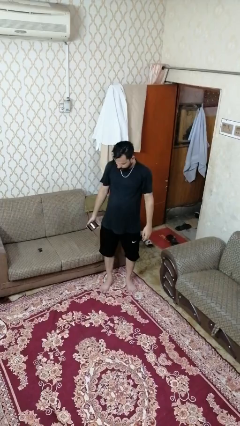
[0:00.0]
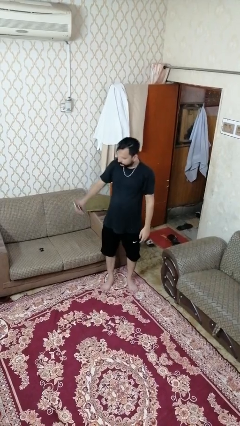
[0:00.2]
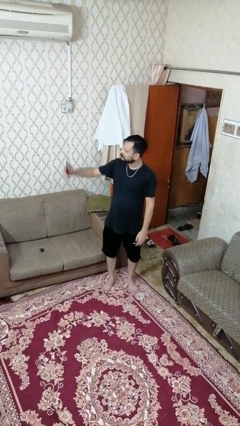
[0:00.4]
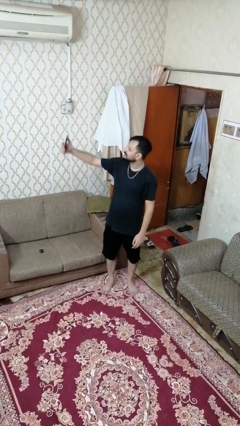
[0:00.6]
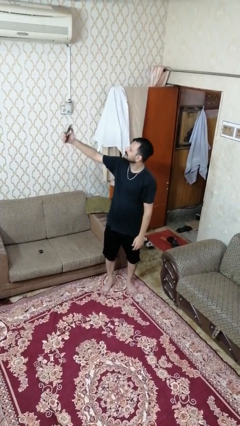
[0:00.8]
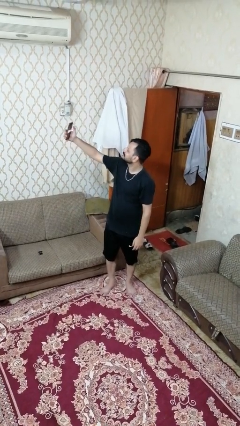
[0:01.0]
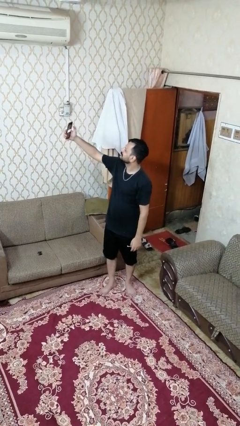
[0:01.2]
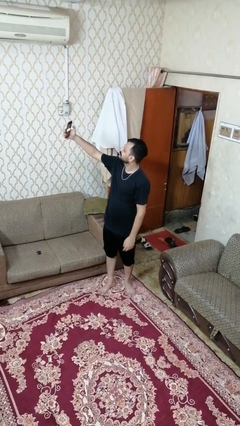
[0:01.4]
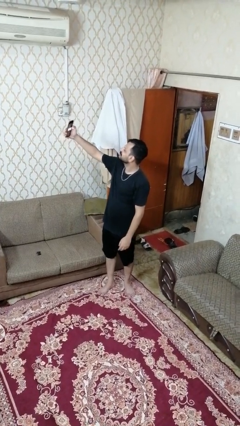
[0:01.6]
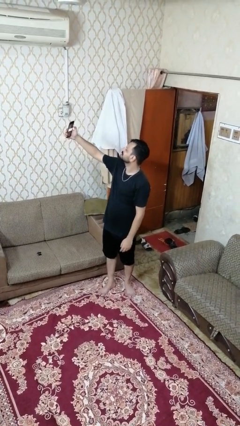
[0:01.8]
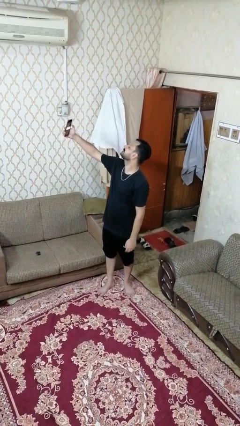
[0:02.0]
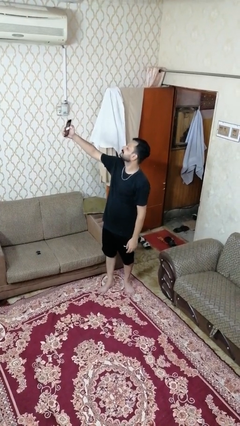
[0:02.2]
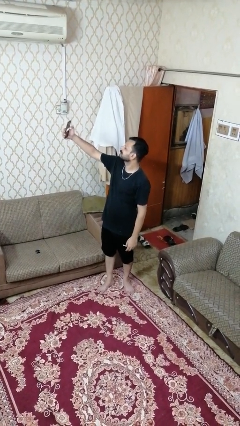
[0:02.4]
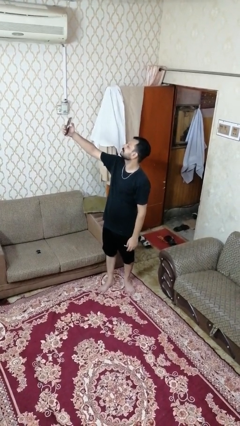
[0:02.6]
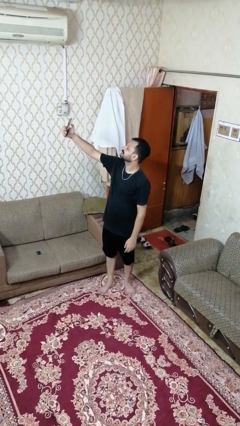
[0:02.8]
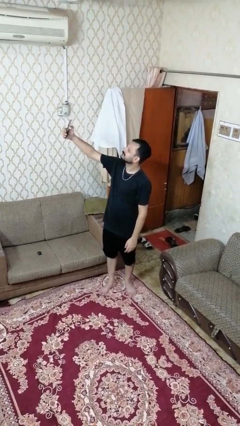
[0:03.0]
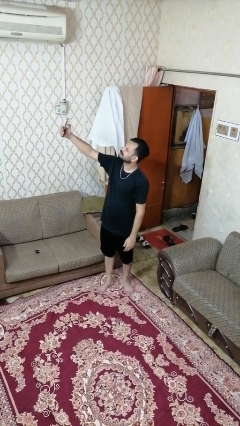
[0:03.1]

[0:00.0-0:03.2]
person takes selfie

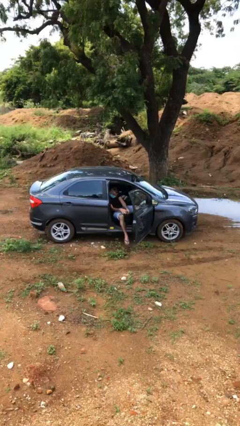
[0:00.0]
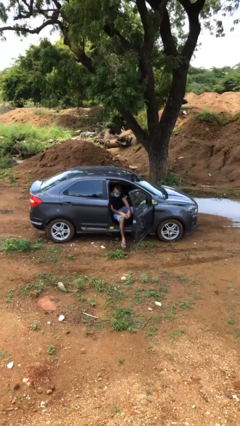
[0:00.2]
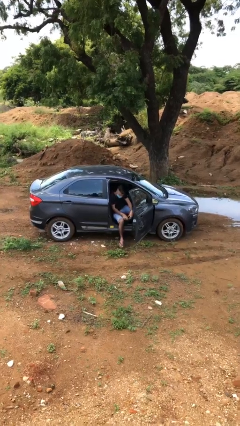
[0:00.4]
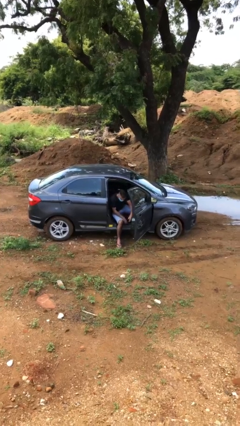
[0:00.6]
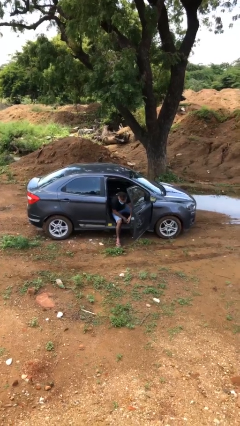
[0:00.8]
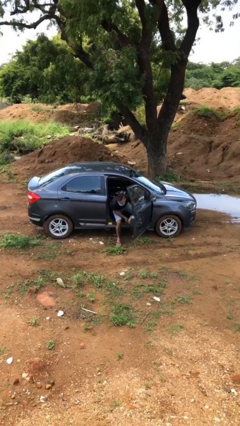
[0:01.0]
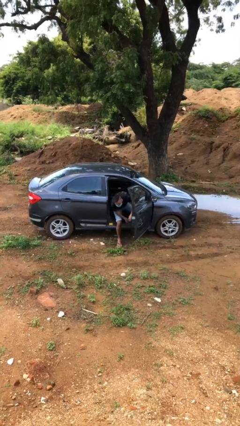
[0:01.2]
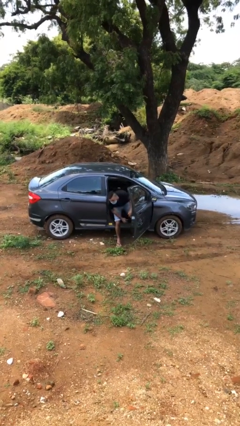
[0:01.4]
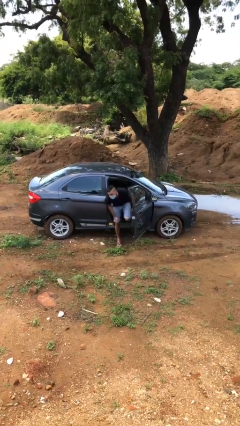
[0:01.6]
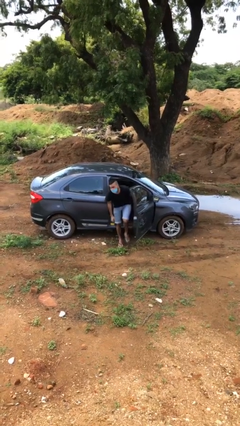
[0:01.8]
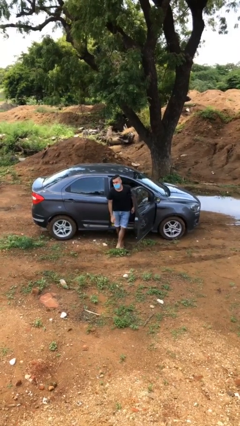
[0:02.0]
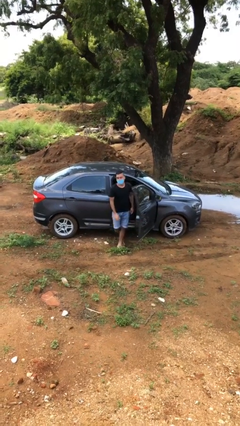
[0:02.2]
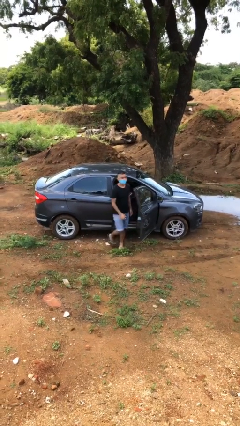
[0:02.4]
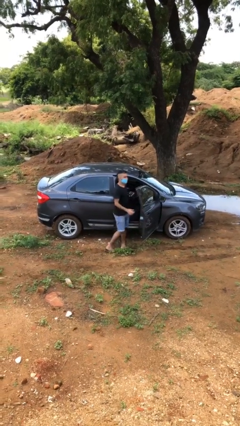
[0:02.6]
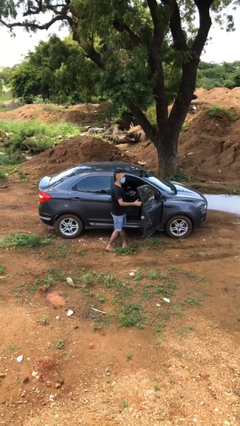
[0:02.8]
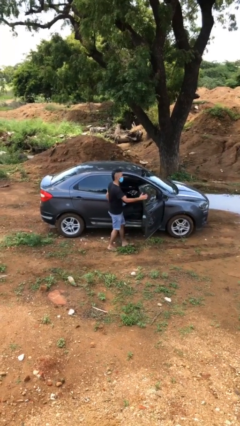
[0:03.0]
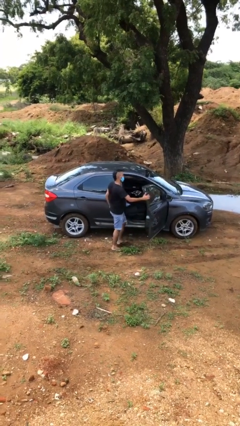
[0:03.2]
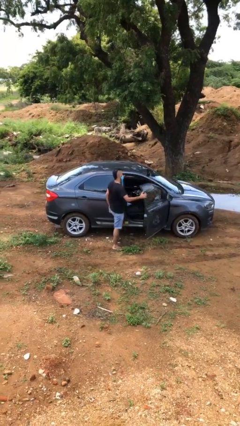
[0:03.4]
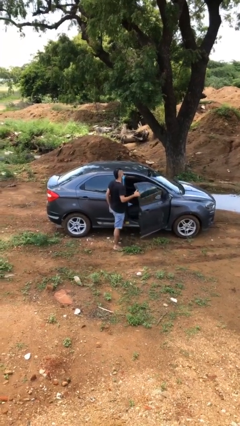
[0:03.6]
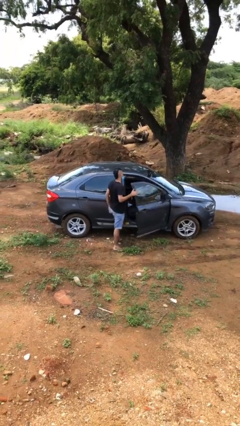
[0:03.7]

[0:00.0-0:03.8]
person exits car

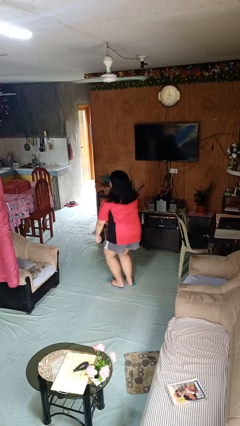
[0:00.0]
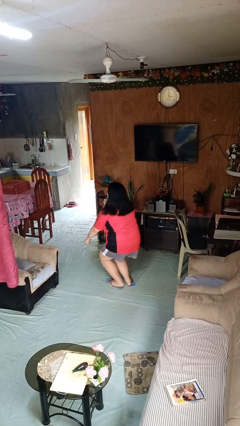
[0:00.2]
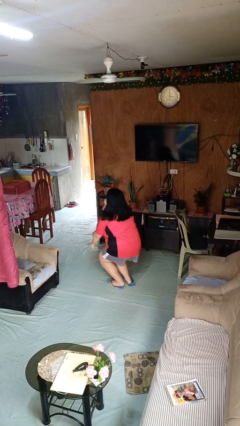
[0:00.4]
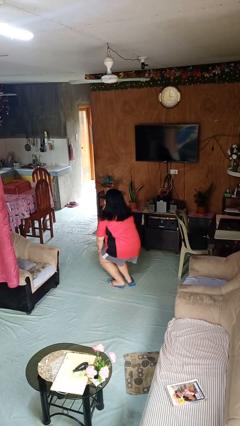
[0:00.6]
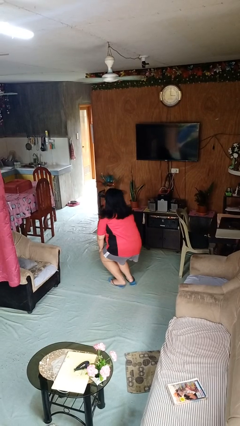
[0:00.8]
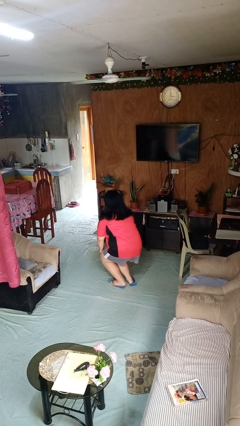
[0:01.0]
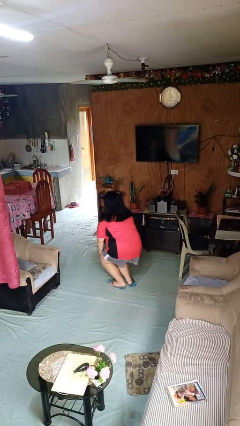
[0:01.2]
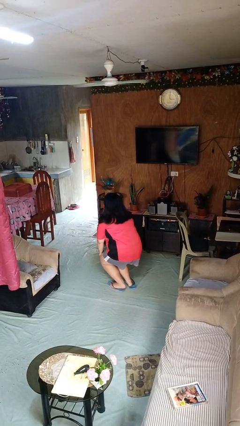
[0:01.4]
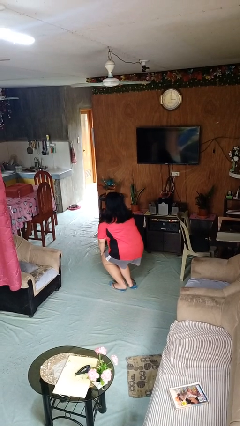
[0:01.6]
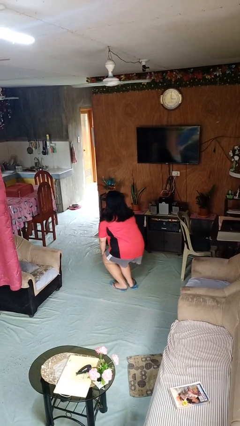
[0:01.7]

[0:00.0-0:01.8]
person squats

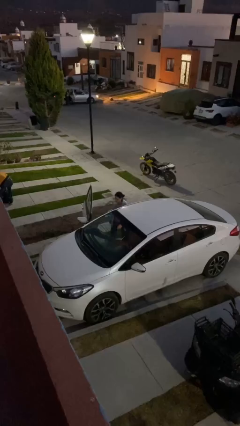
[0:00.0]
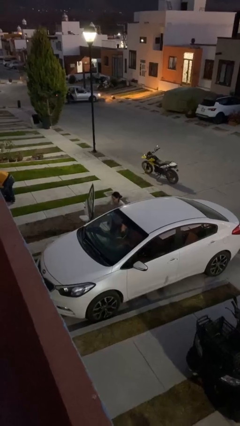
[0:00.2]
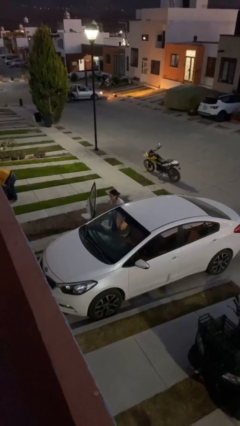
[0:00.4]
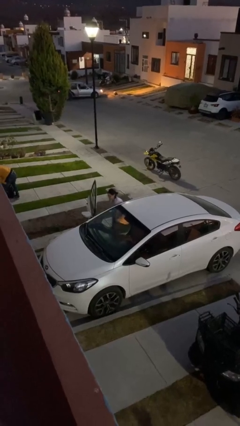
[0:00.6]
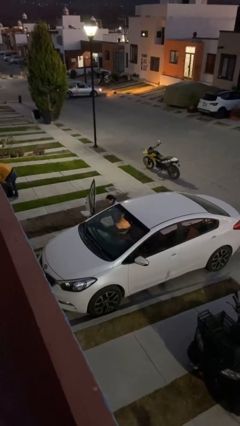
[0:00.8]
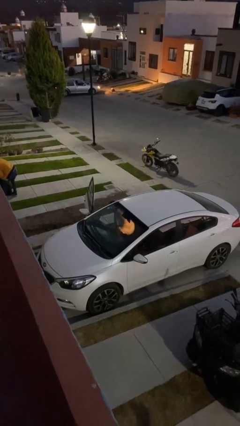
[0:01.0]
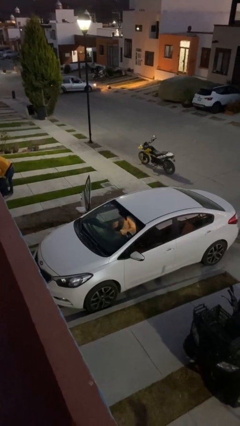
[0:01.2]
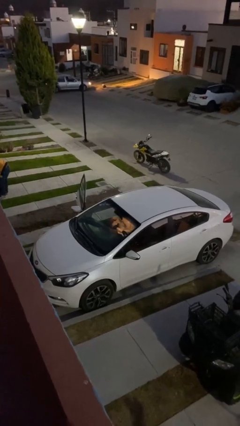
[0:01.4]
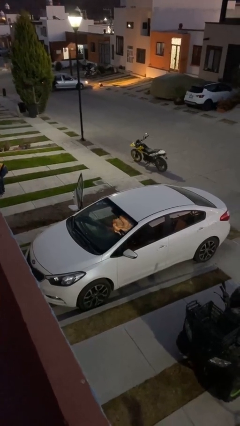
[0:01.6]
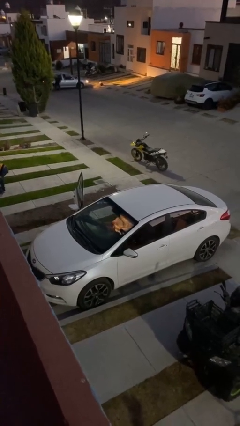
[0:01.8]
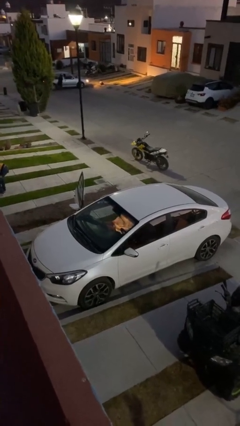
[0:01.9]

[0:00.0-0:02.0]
person enters car

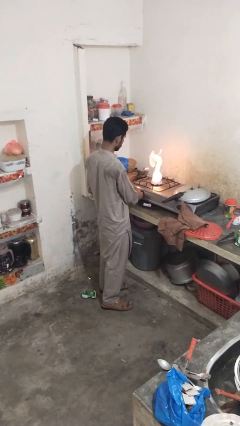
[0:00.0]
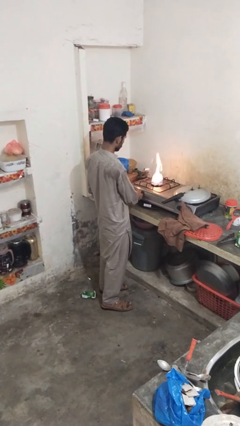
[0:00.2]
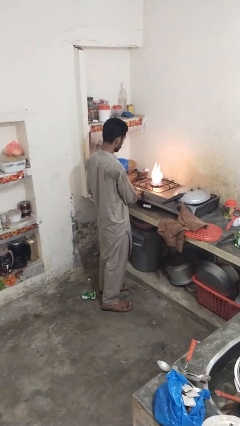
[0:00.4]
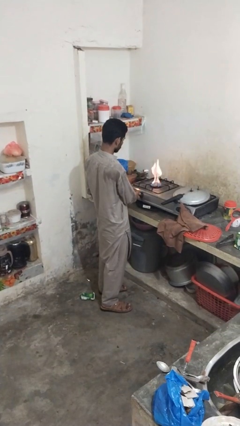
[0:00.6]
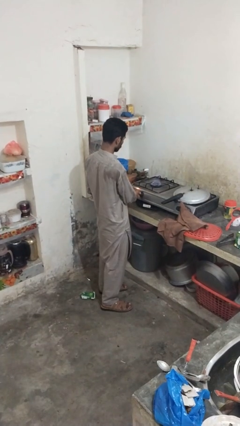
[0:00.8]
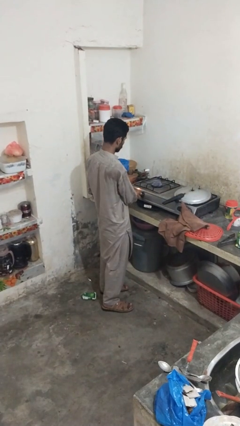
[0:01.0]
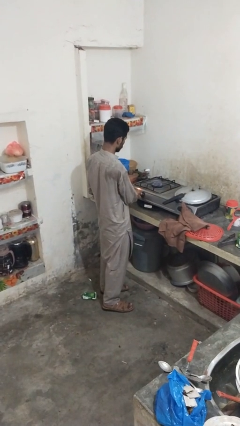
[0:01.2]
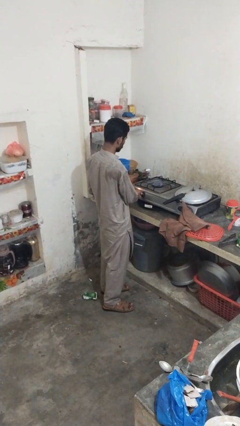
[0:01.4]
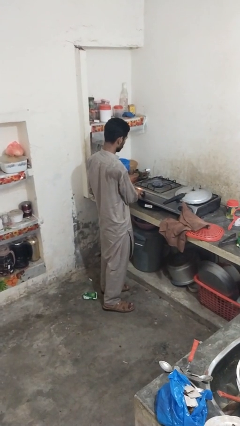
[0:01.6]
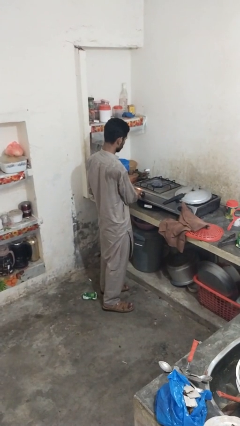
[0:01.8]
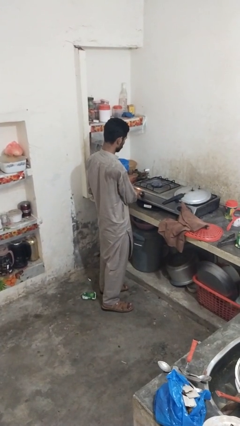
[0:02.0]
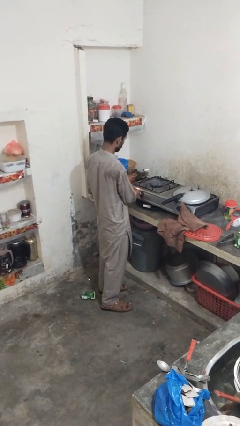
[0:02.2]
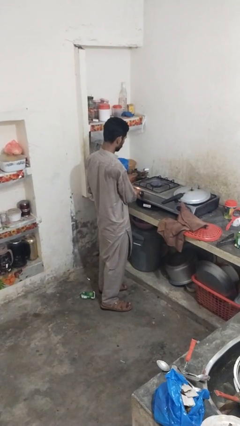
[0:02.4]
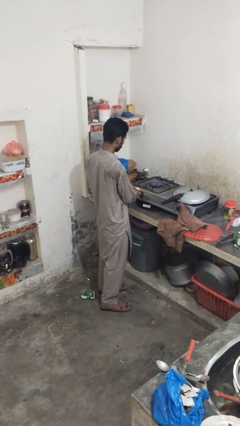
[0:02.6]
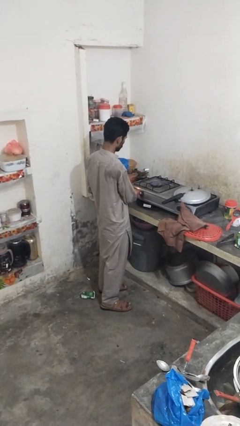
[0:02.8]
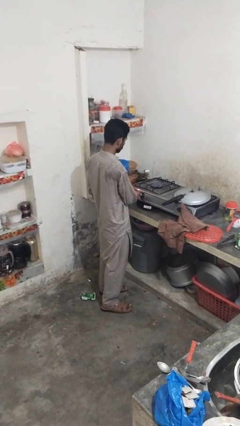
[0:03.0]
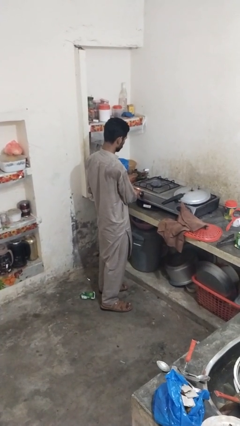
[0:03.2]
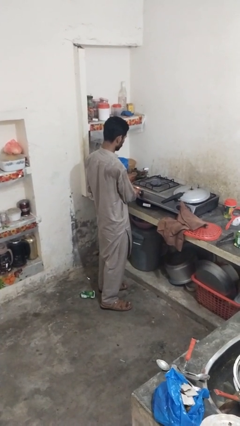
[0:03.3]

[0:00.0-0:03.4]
person turns off stovetop

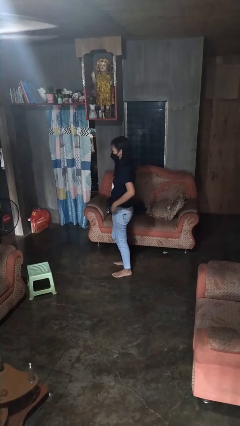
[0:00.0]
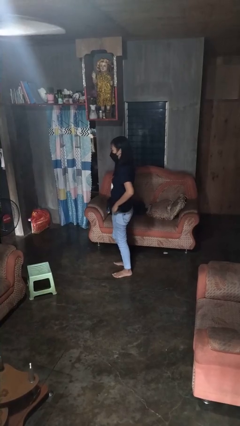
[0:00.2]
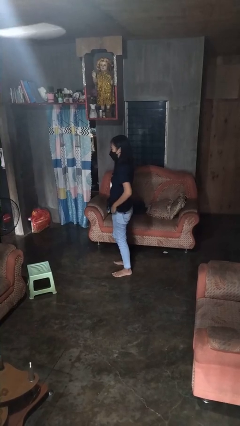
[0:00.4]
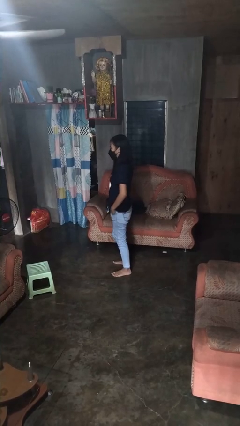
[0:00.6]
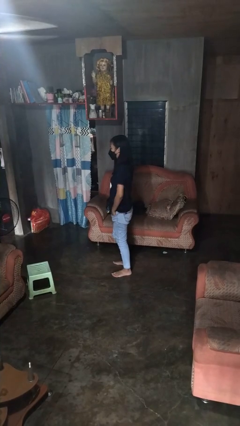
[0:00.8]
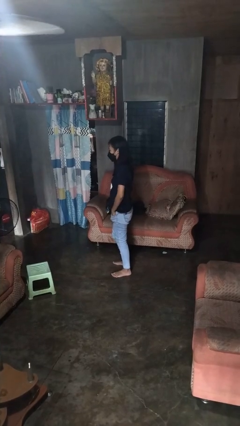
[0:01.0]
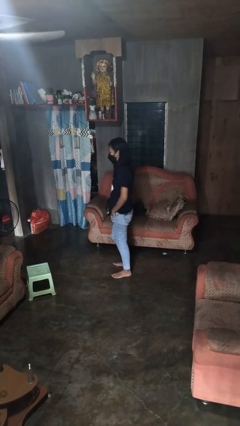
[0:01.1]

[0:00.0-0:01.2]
person puts hands in back pockets

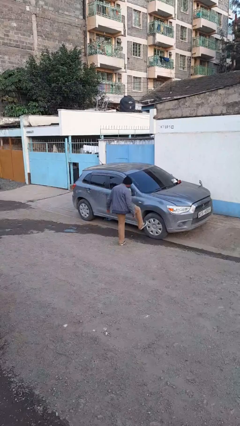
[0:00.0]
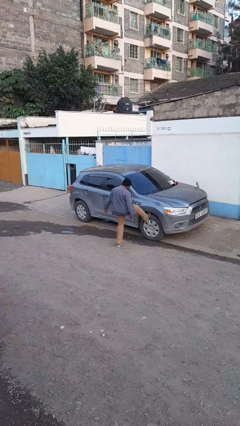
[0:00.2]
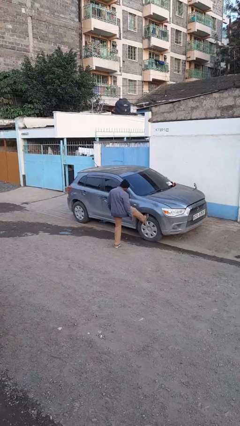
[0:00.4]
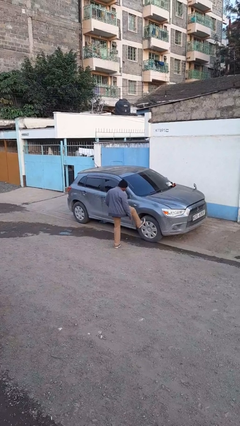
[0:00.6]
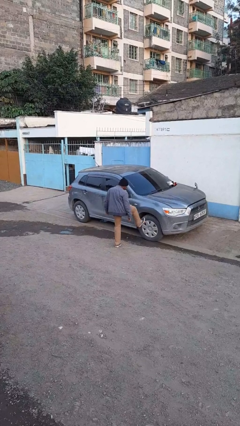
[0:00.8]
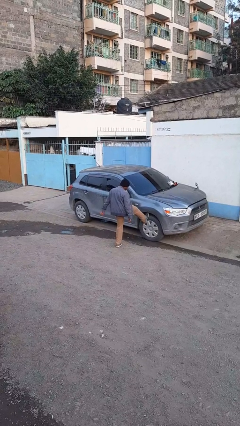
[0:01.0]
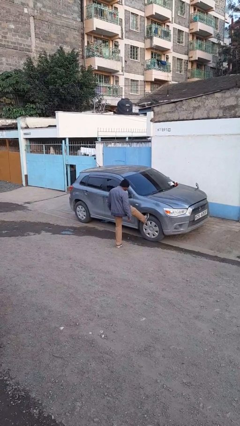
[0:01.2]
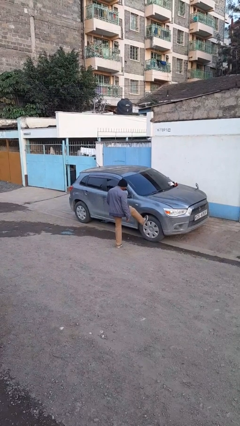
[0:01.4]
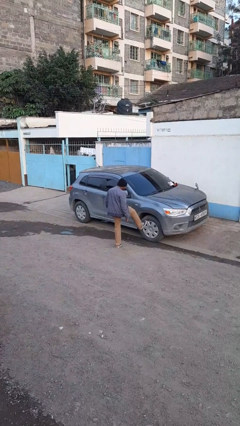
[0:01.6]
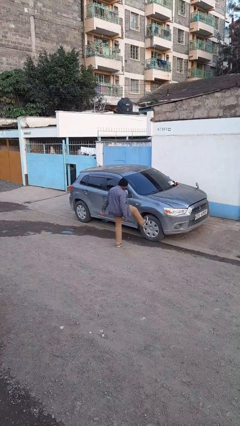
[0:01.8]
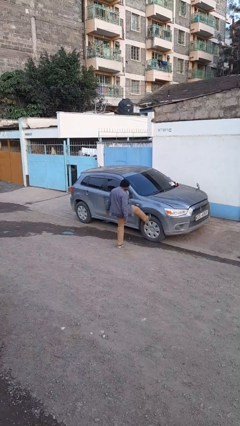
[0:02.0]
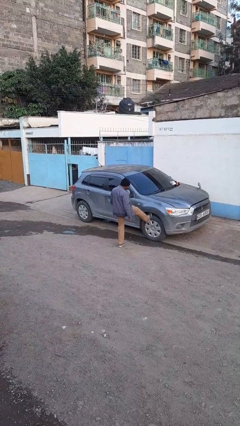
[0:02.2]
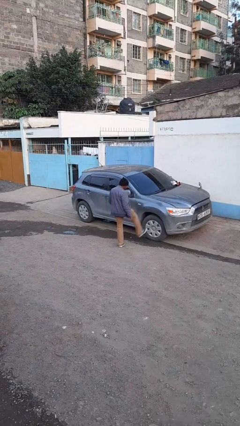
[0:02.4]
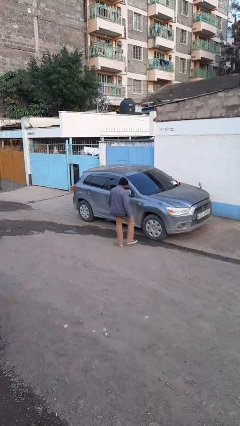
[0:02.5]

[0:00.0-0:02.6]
person kicks car tires
